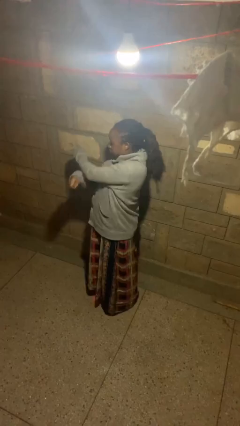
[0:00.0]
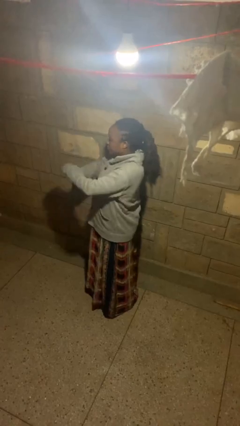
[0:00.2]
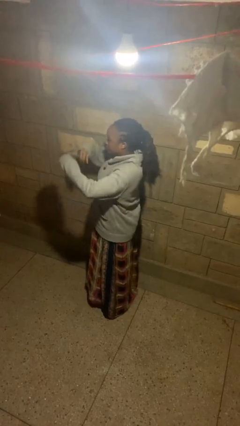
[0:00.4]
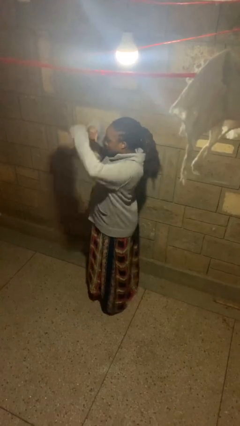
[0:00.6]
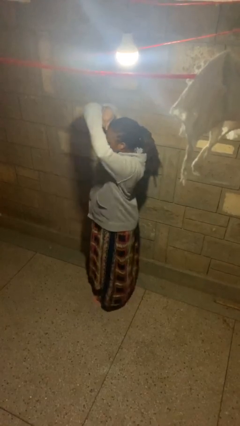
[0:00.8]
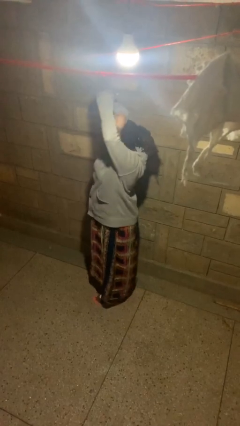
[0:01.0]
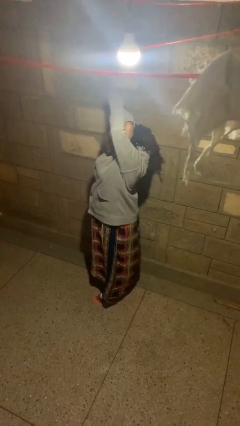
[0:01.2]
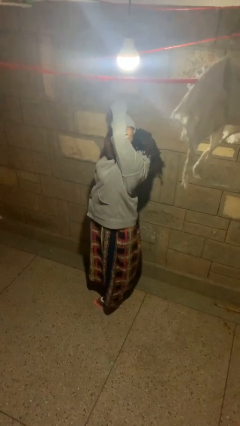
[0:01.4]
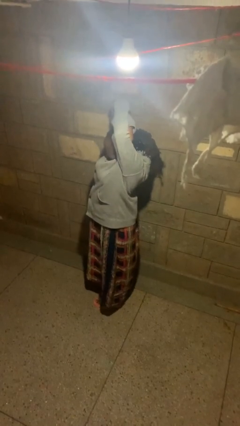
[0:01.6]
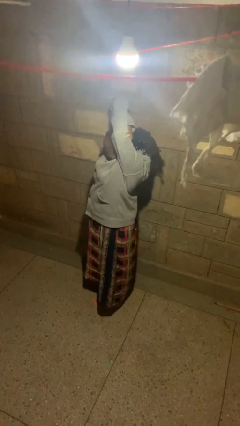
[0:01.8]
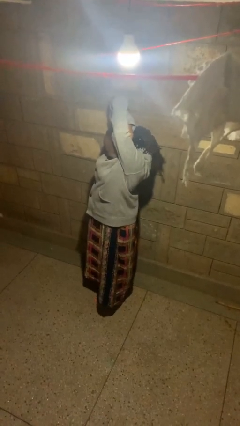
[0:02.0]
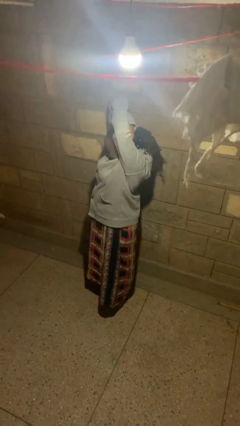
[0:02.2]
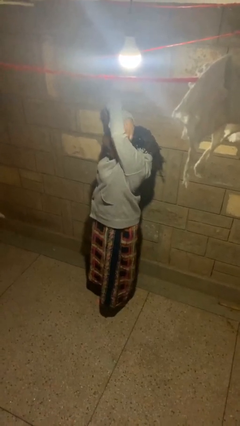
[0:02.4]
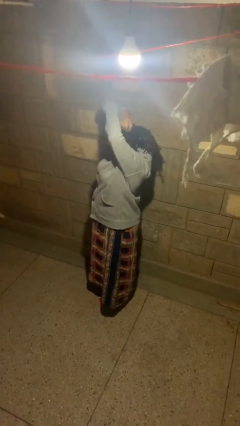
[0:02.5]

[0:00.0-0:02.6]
person stretches arms over head

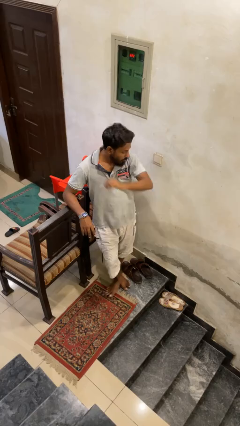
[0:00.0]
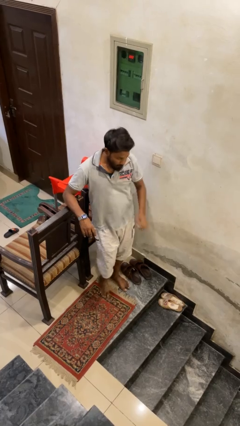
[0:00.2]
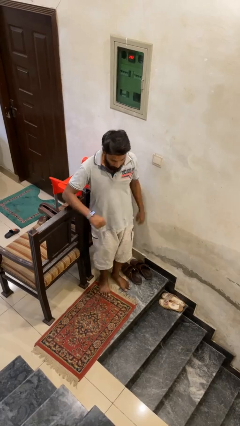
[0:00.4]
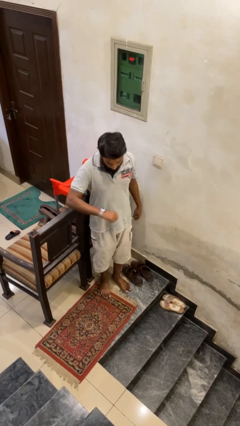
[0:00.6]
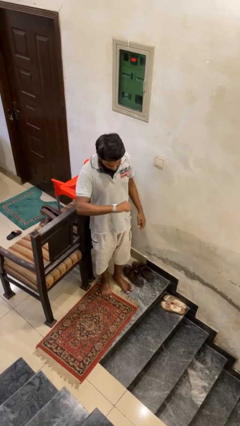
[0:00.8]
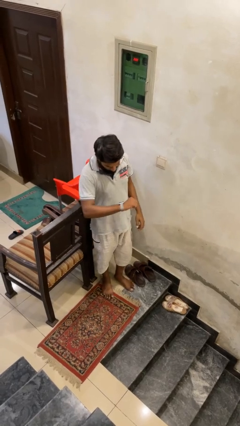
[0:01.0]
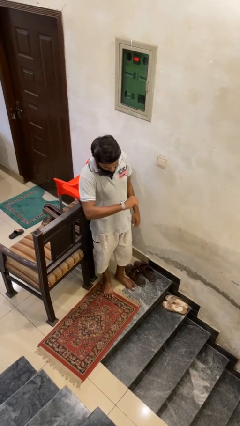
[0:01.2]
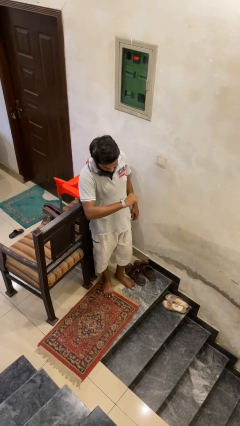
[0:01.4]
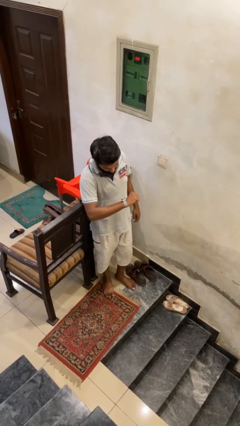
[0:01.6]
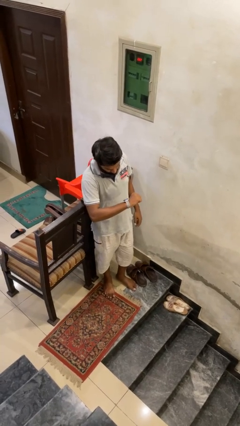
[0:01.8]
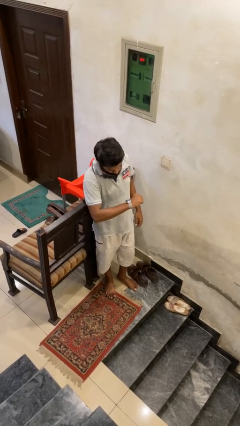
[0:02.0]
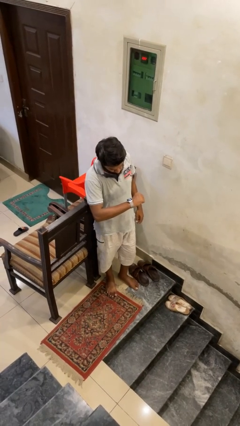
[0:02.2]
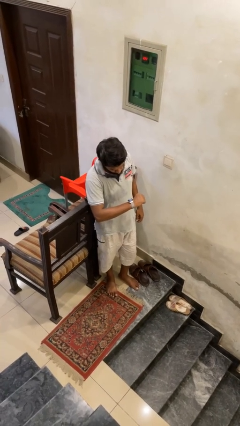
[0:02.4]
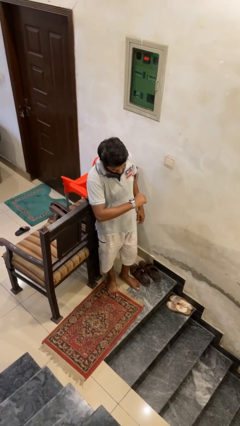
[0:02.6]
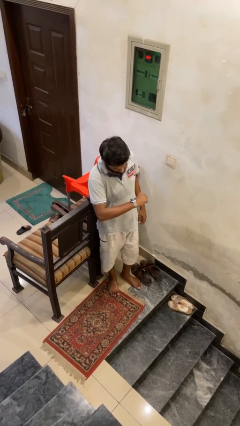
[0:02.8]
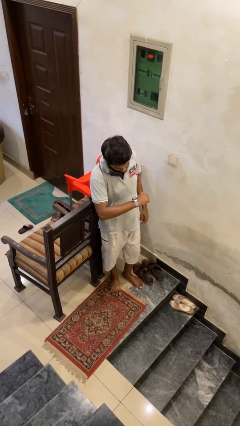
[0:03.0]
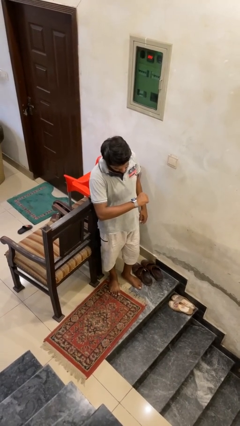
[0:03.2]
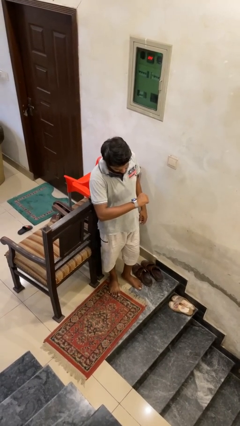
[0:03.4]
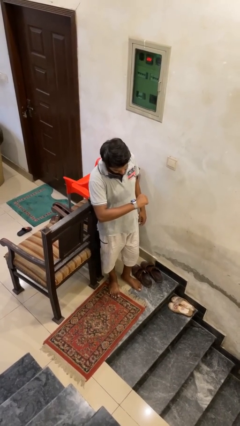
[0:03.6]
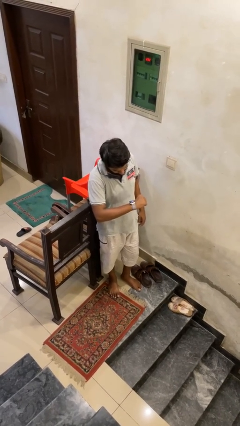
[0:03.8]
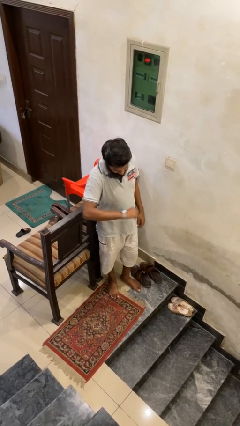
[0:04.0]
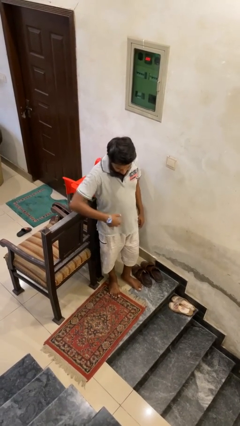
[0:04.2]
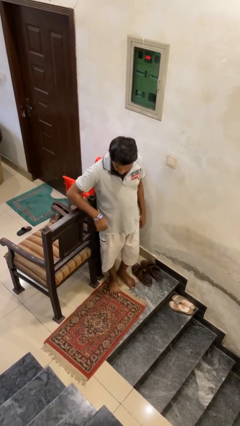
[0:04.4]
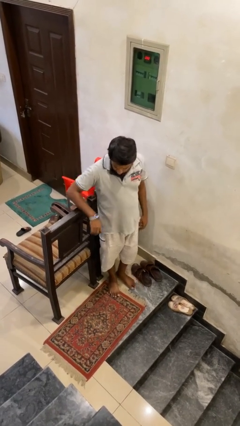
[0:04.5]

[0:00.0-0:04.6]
person looks at wristwatch

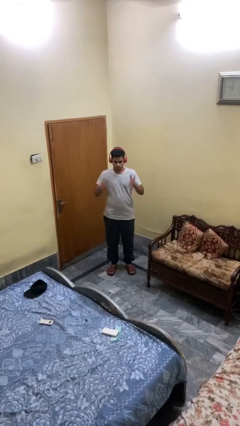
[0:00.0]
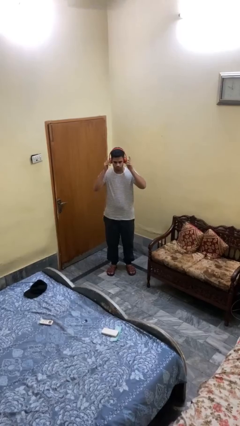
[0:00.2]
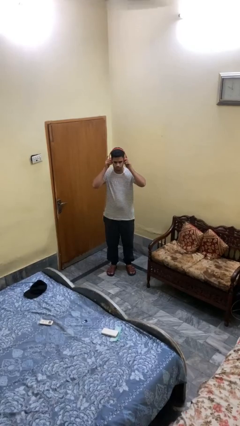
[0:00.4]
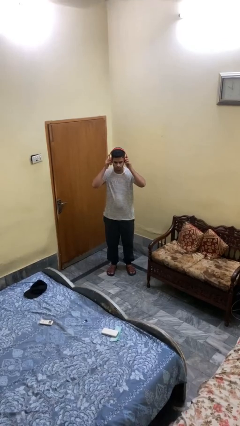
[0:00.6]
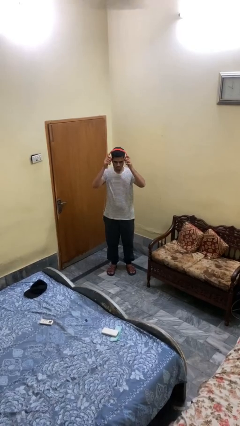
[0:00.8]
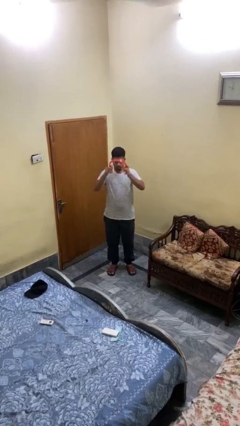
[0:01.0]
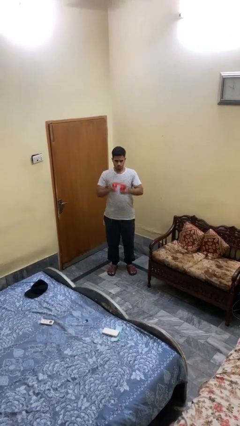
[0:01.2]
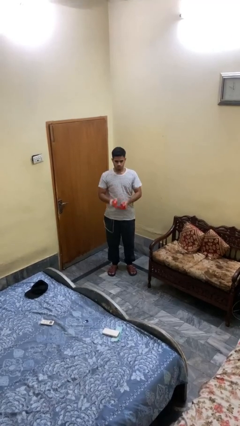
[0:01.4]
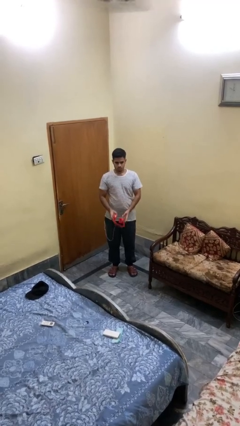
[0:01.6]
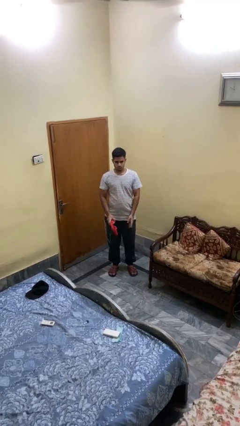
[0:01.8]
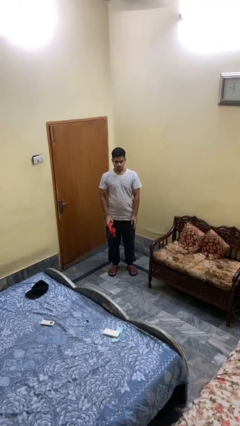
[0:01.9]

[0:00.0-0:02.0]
person takes off headphones

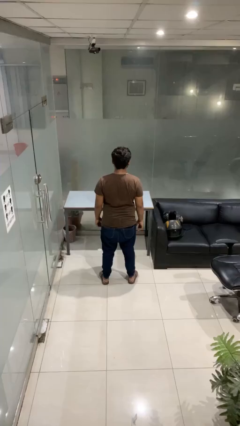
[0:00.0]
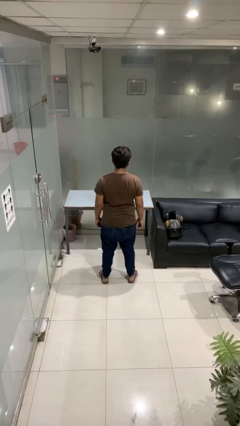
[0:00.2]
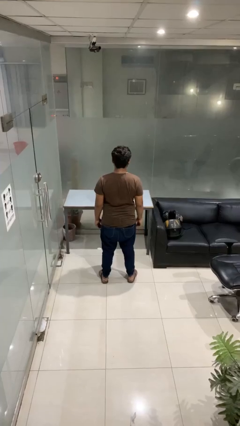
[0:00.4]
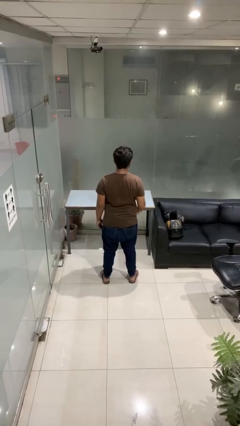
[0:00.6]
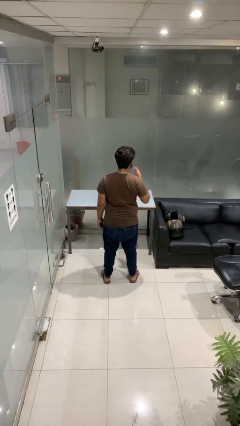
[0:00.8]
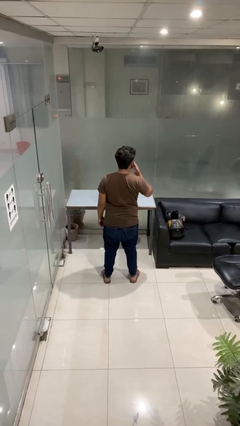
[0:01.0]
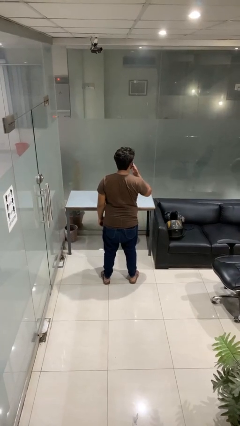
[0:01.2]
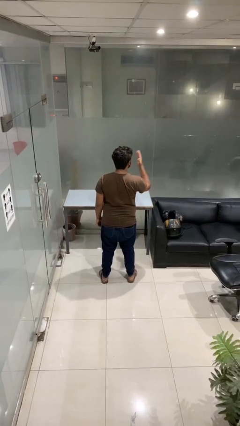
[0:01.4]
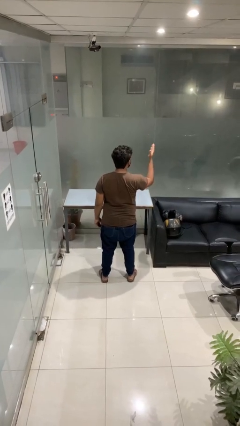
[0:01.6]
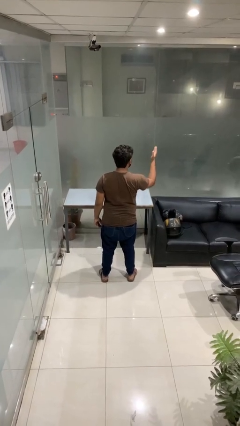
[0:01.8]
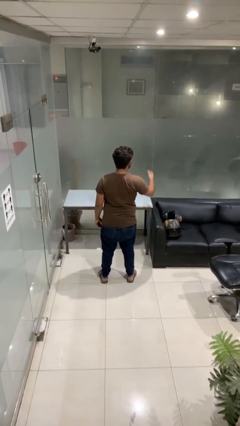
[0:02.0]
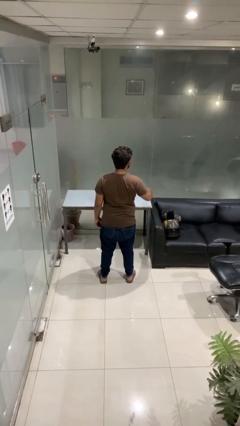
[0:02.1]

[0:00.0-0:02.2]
person gestures blow kiss

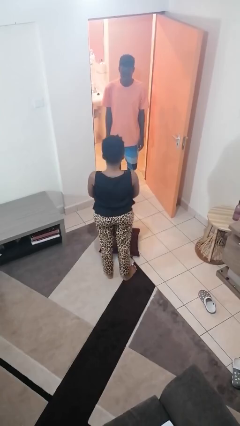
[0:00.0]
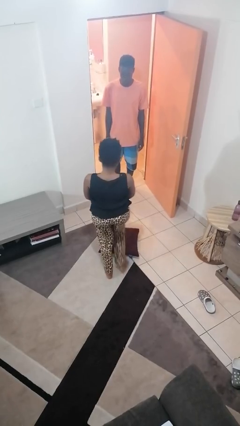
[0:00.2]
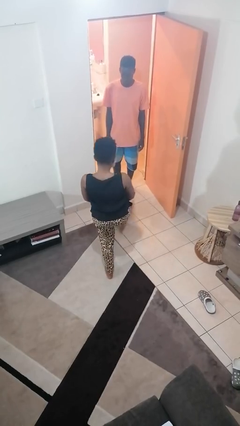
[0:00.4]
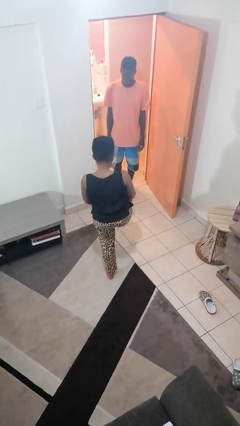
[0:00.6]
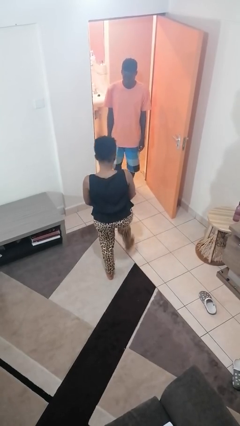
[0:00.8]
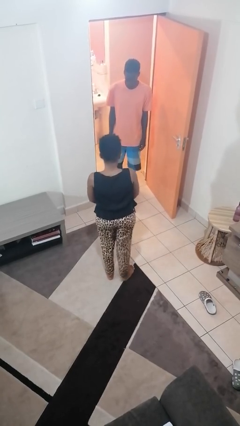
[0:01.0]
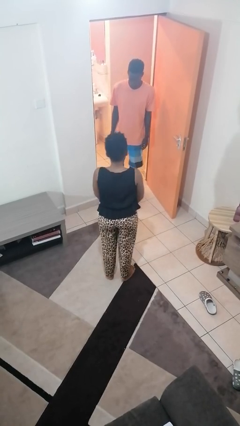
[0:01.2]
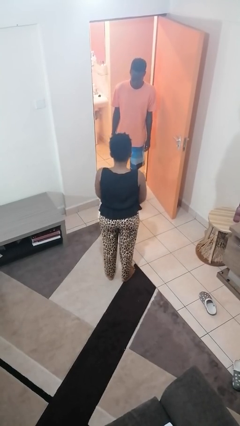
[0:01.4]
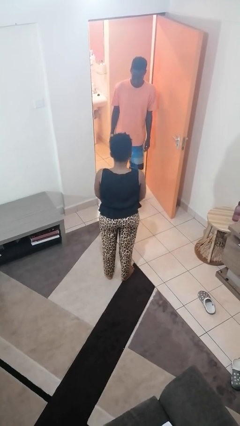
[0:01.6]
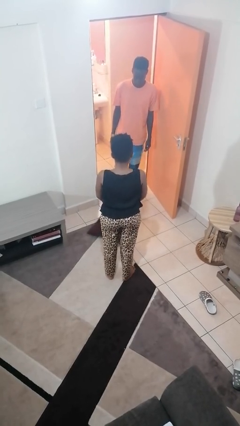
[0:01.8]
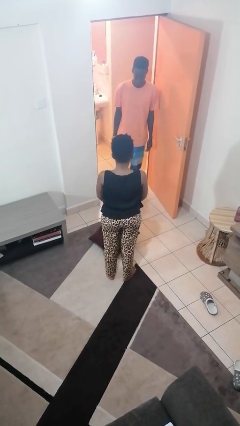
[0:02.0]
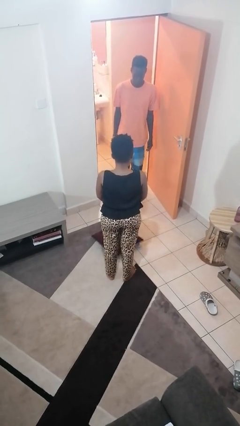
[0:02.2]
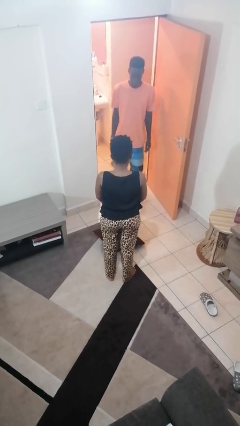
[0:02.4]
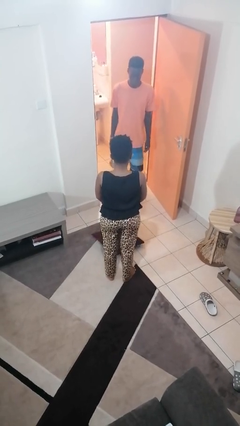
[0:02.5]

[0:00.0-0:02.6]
person kicks object to person

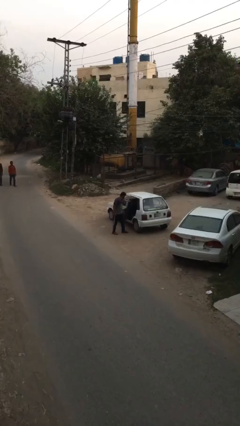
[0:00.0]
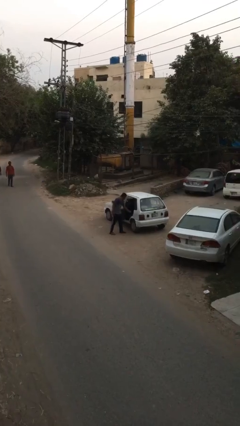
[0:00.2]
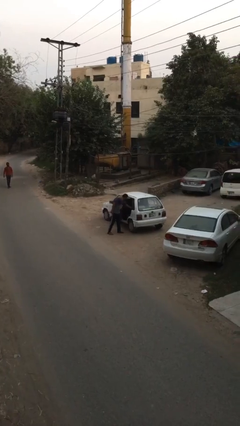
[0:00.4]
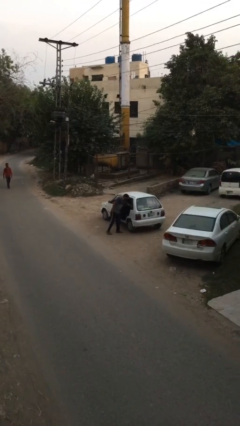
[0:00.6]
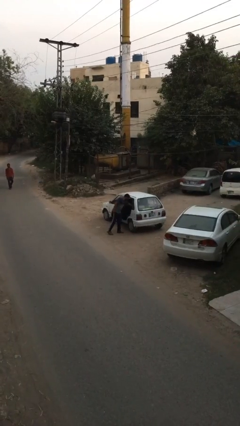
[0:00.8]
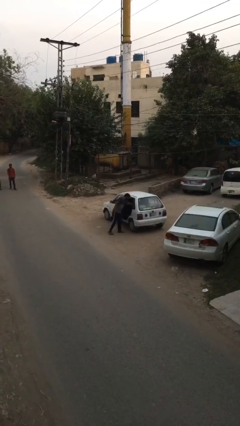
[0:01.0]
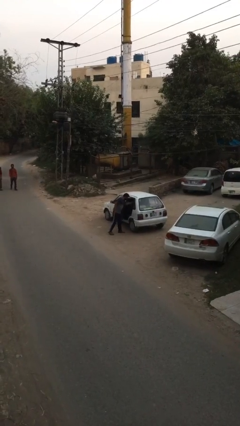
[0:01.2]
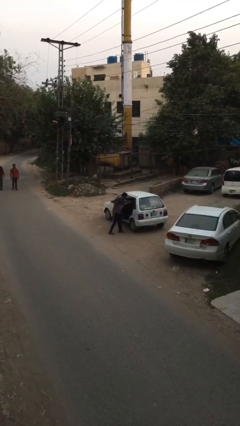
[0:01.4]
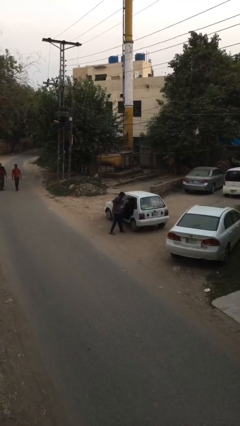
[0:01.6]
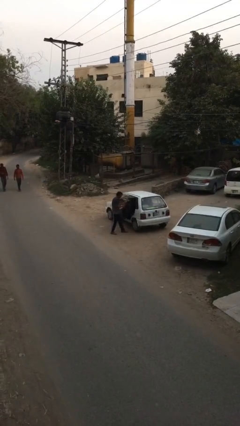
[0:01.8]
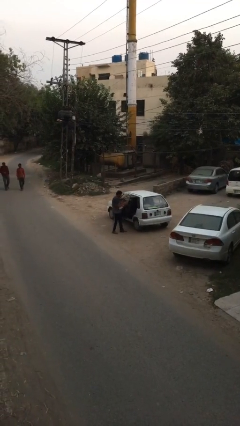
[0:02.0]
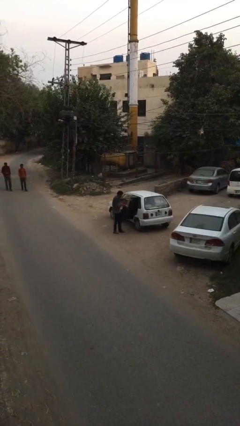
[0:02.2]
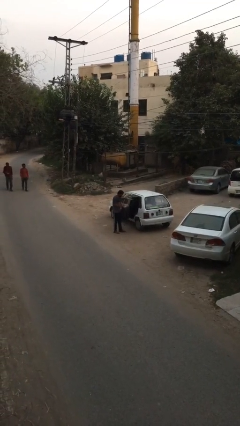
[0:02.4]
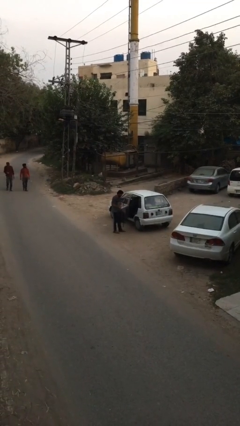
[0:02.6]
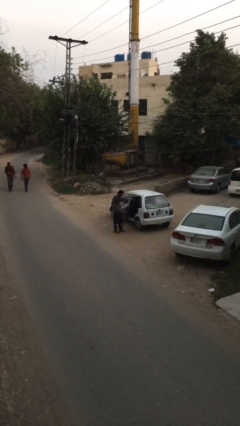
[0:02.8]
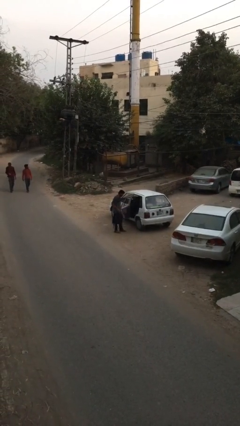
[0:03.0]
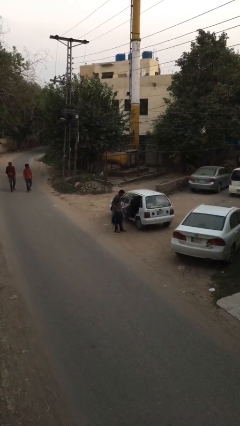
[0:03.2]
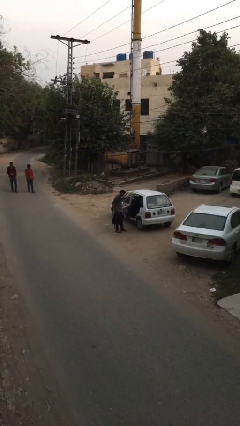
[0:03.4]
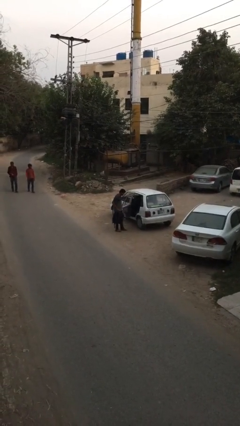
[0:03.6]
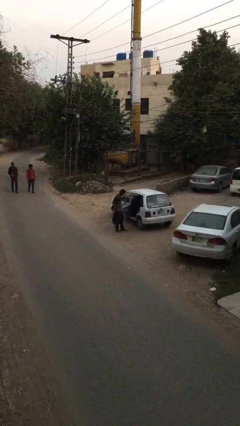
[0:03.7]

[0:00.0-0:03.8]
person unloads car
